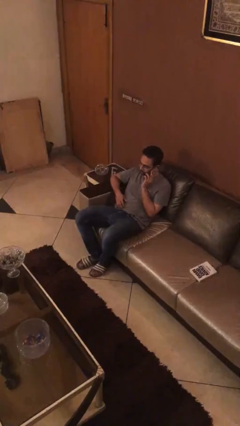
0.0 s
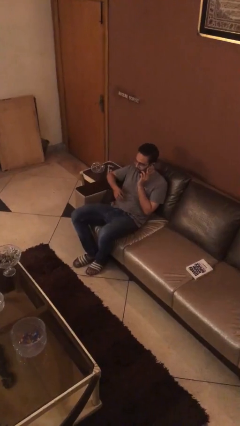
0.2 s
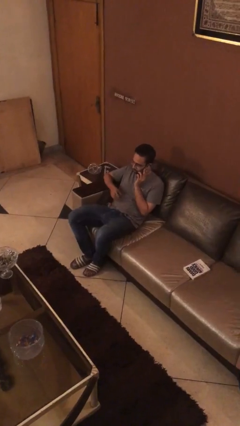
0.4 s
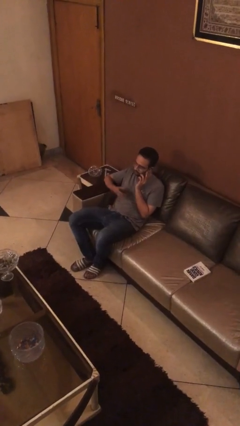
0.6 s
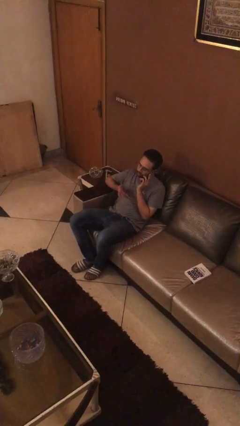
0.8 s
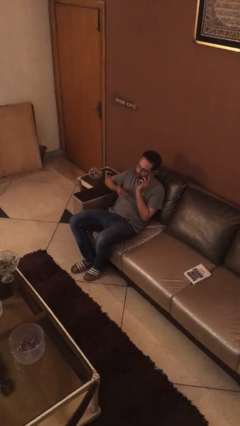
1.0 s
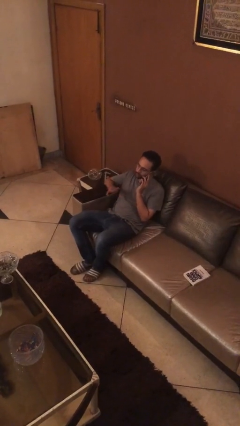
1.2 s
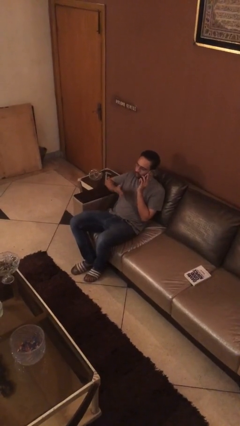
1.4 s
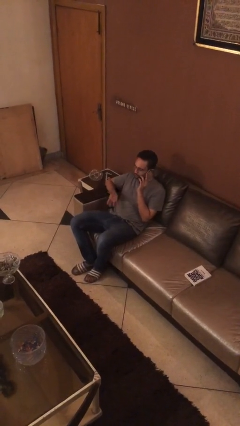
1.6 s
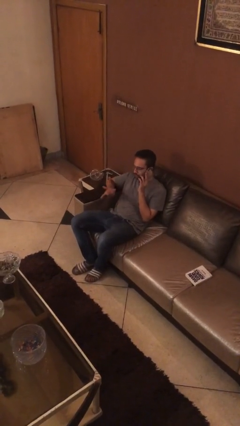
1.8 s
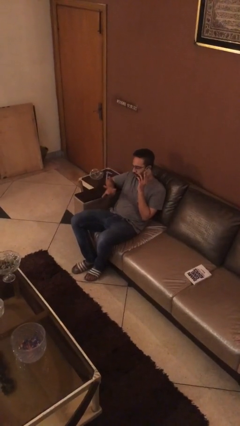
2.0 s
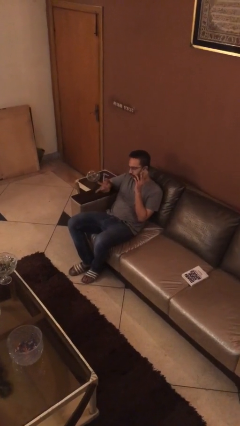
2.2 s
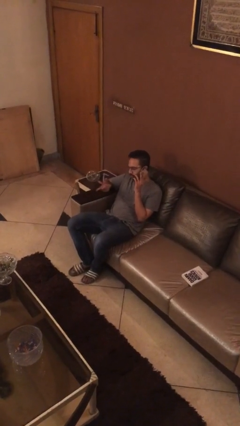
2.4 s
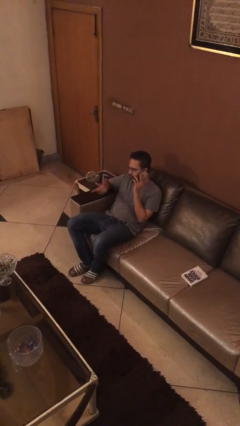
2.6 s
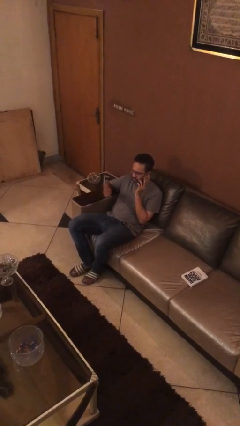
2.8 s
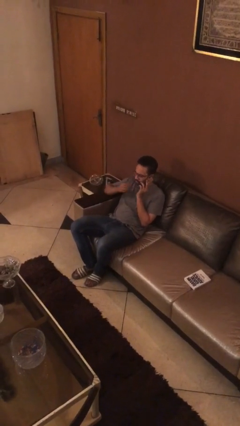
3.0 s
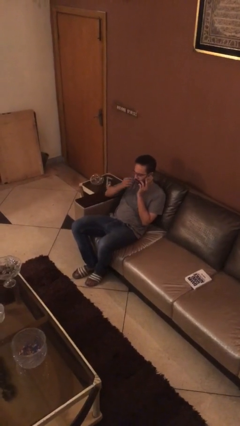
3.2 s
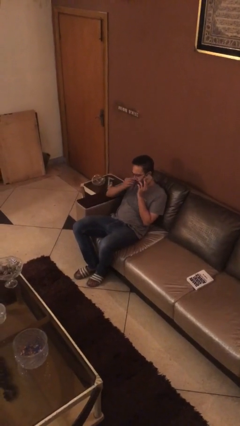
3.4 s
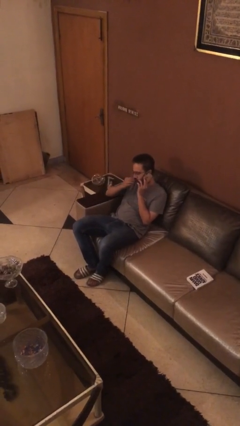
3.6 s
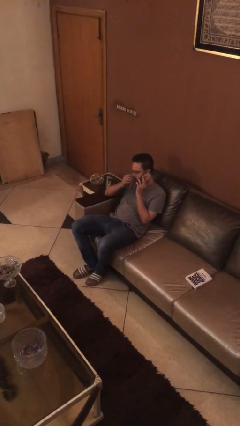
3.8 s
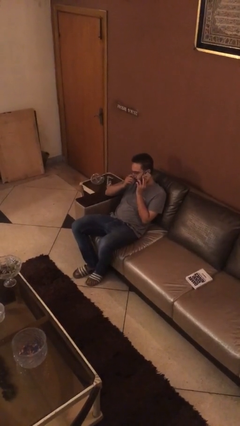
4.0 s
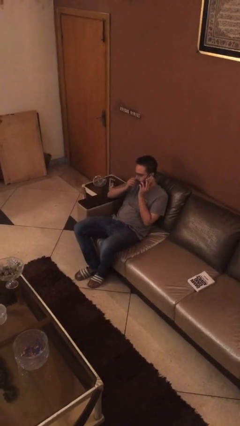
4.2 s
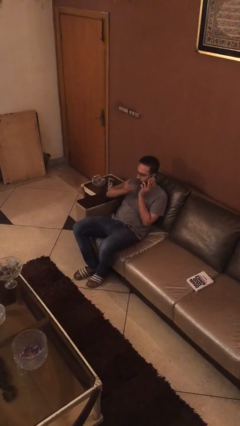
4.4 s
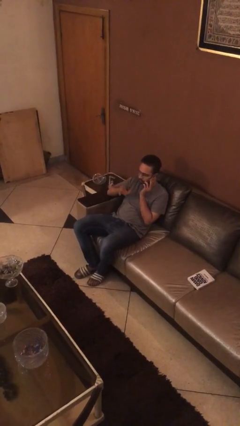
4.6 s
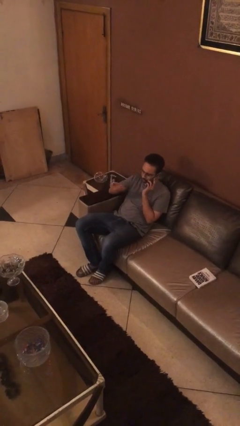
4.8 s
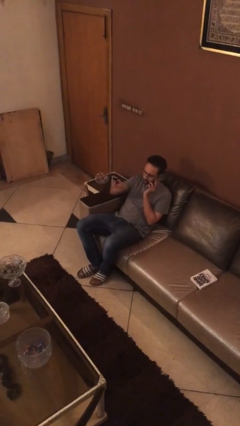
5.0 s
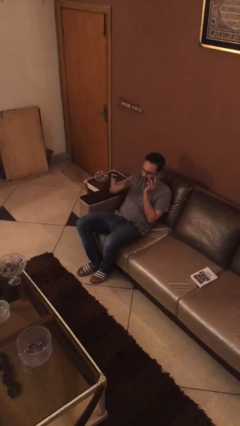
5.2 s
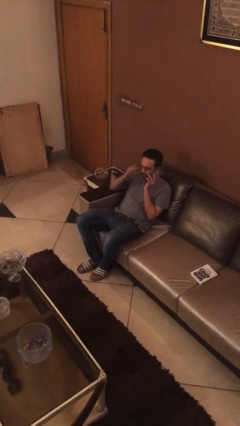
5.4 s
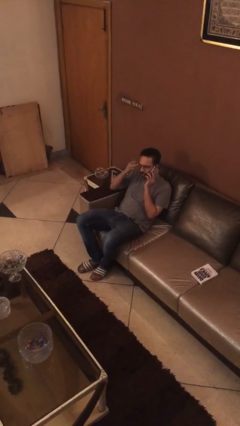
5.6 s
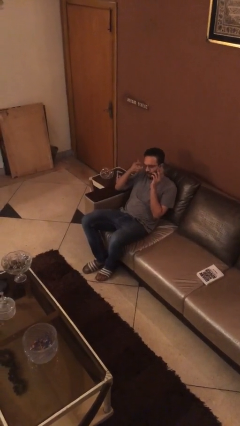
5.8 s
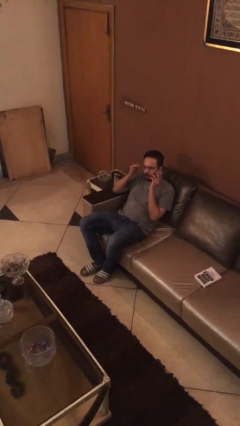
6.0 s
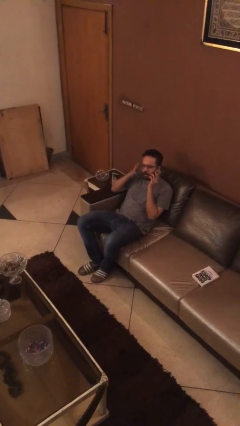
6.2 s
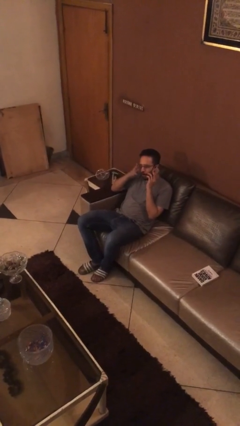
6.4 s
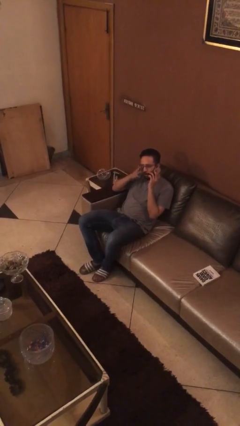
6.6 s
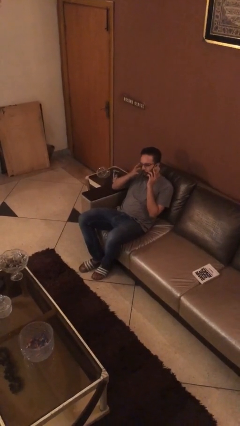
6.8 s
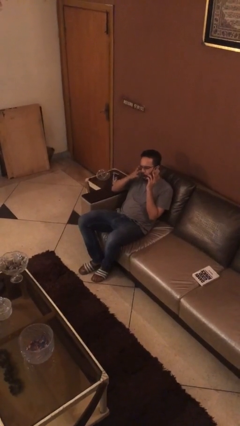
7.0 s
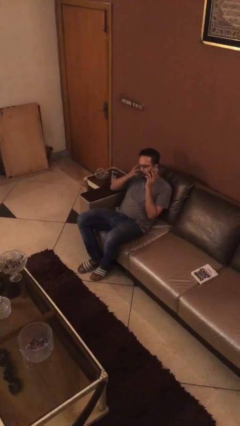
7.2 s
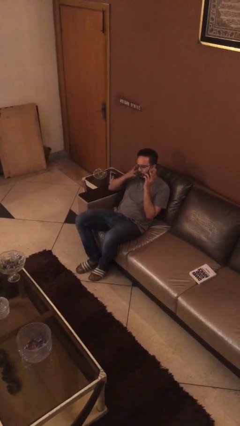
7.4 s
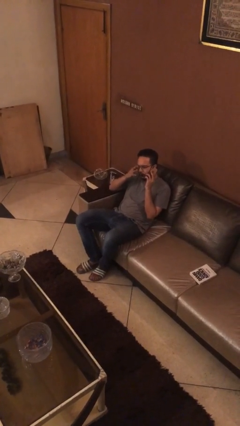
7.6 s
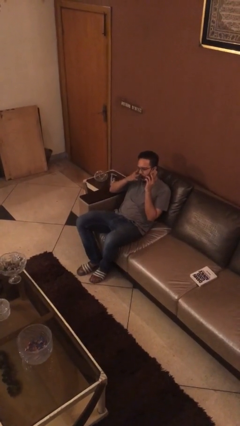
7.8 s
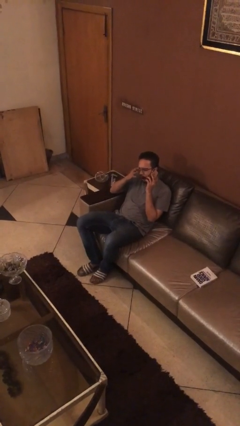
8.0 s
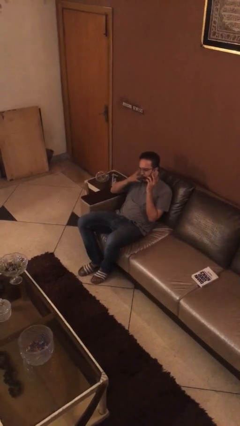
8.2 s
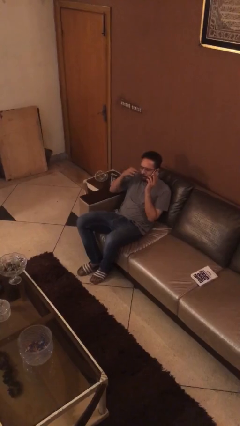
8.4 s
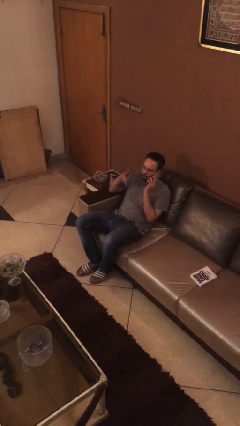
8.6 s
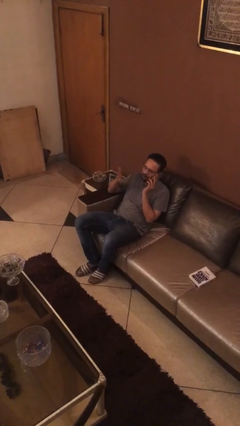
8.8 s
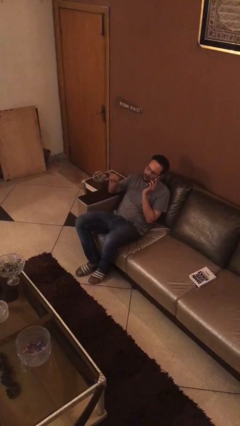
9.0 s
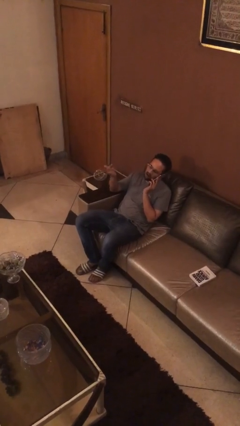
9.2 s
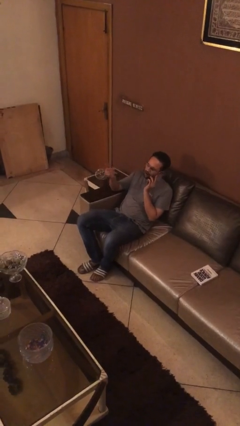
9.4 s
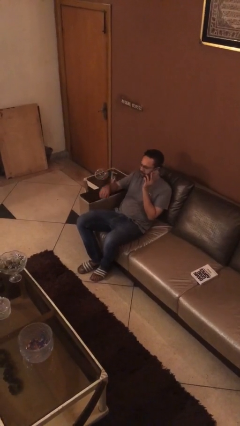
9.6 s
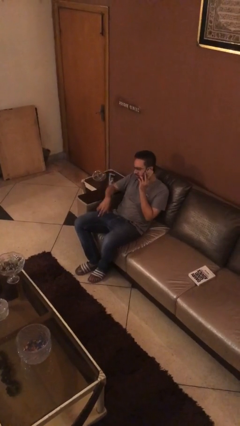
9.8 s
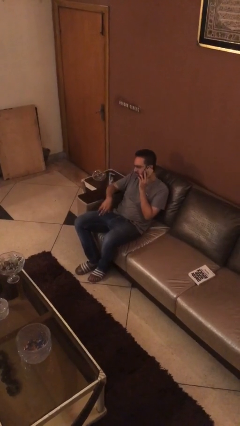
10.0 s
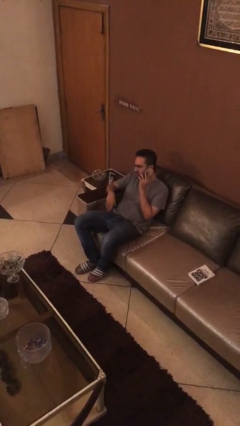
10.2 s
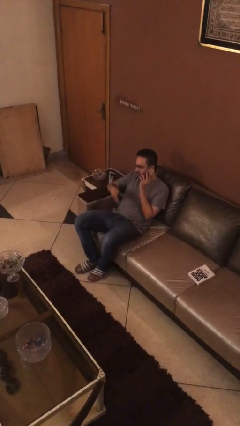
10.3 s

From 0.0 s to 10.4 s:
person talks on phone

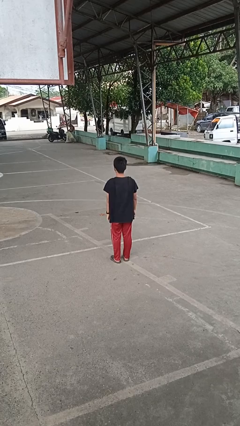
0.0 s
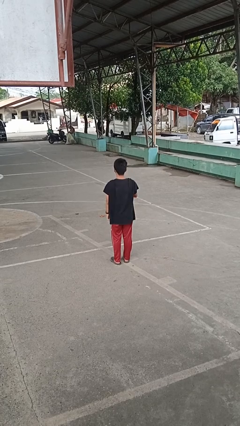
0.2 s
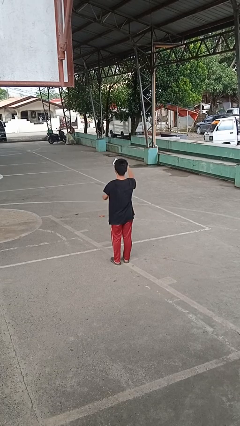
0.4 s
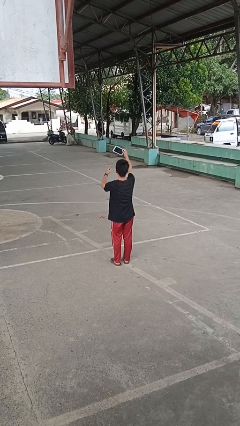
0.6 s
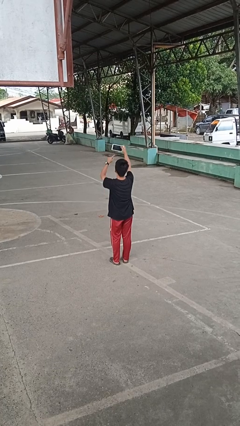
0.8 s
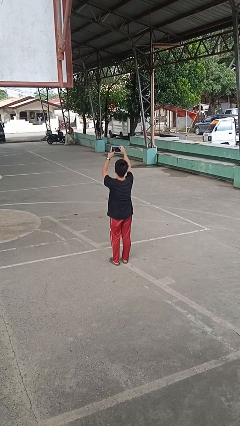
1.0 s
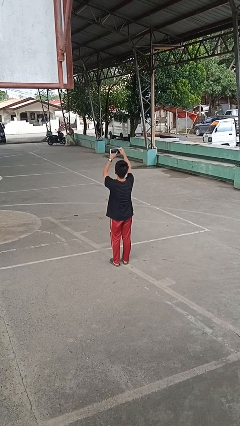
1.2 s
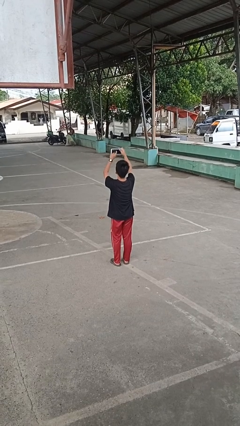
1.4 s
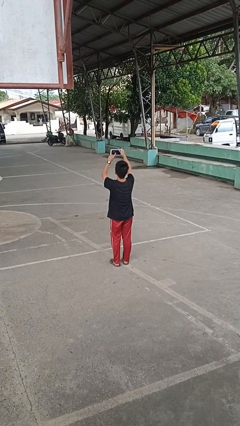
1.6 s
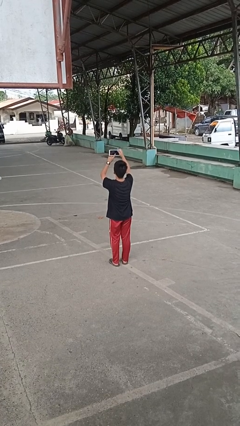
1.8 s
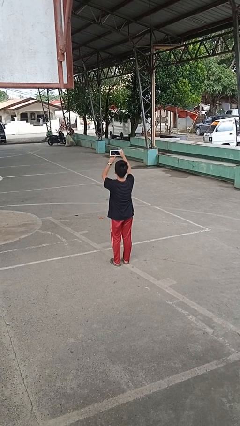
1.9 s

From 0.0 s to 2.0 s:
person interacts with tablet

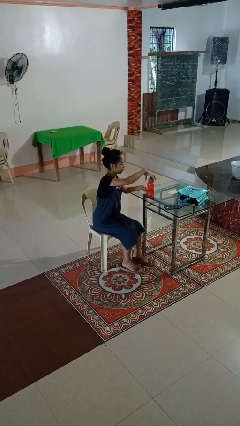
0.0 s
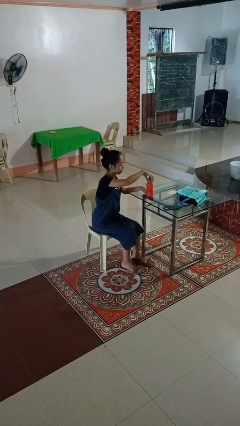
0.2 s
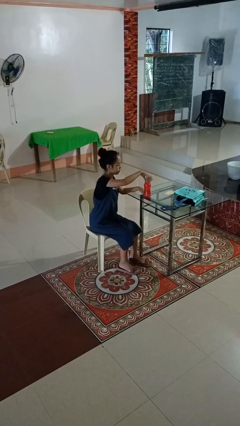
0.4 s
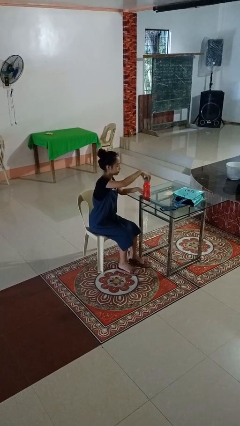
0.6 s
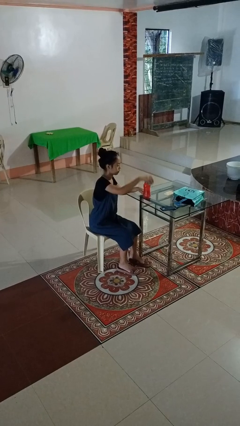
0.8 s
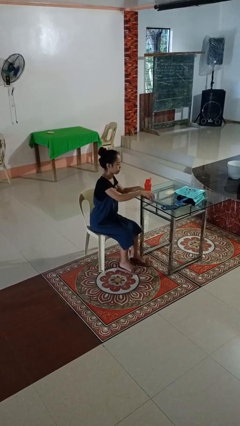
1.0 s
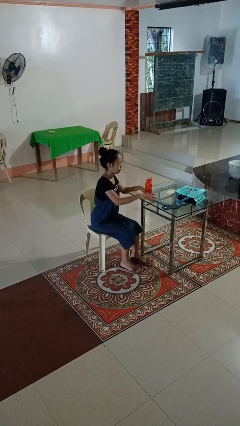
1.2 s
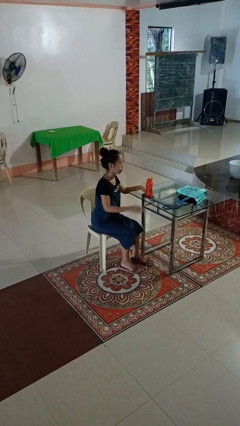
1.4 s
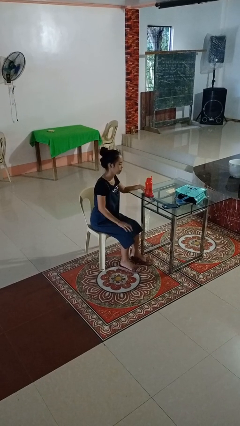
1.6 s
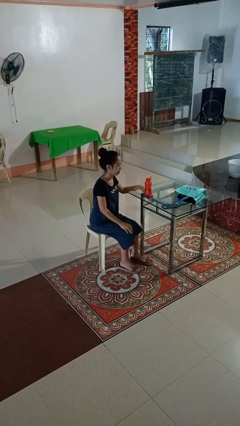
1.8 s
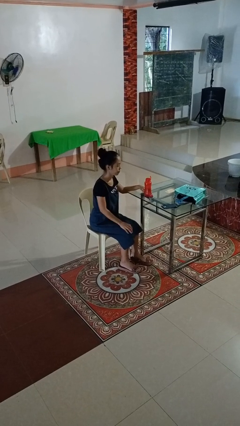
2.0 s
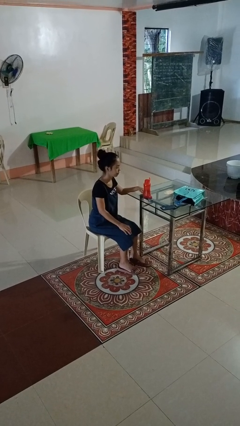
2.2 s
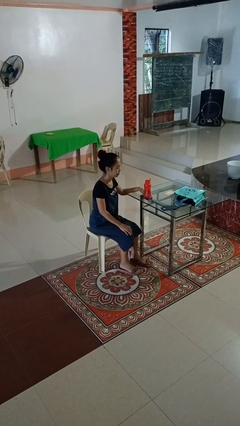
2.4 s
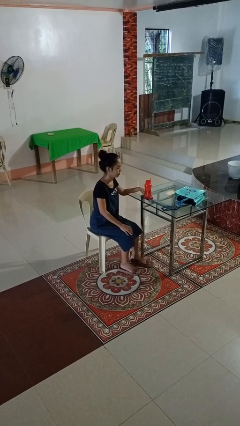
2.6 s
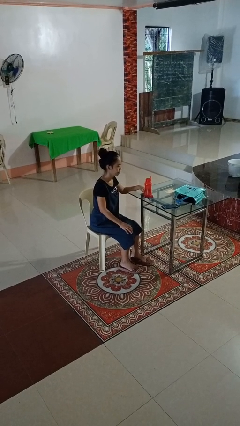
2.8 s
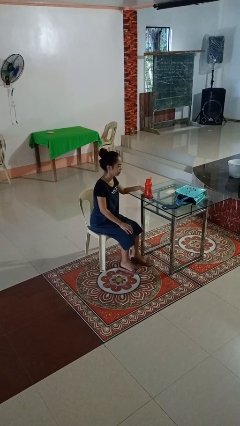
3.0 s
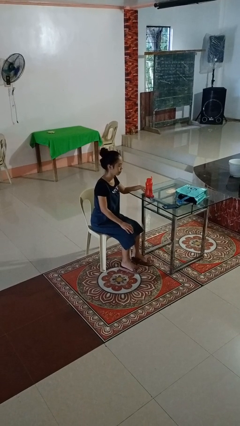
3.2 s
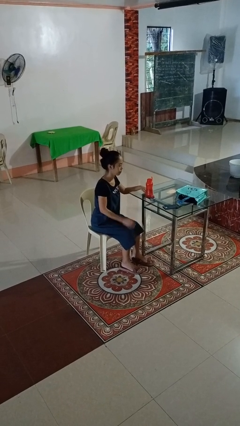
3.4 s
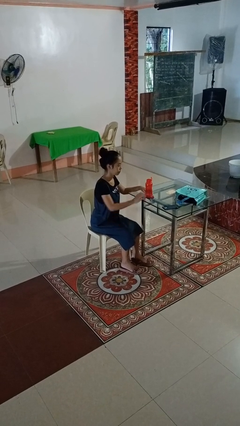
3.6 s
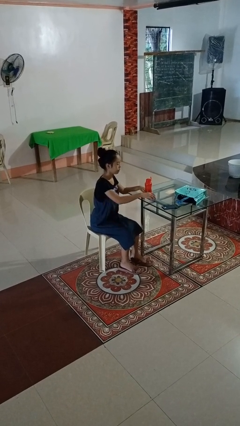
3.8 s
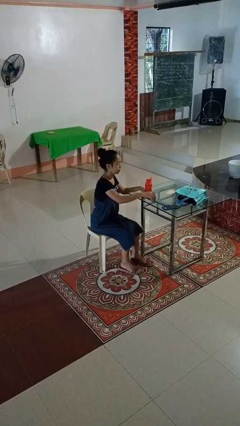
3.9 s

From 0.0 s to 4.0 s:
person unscrews lid from bottle

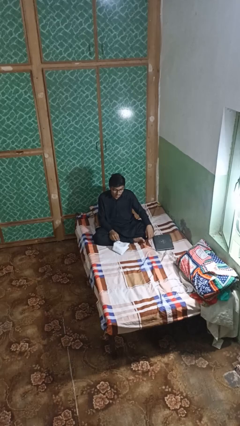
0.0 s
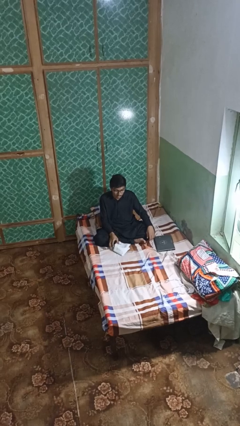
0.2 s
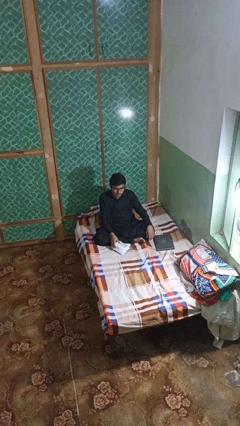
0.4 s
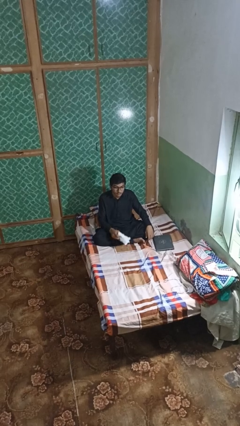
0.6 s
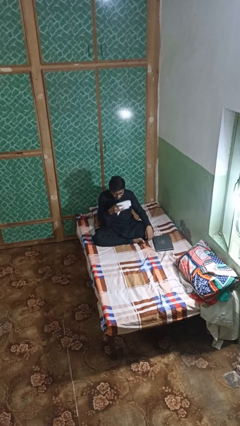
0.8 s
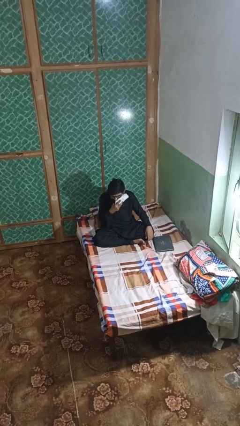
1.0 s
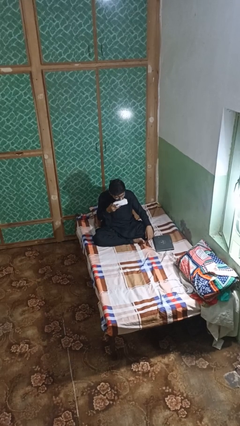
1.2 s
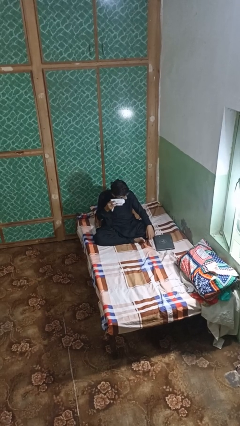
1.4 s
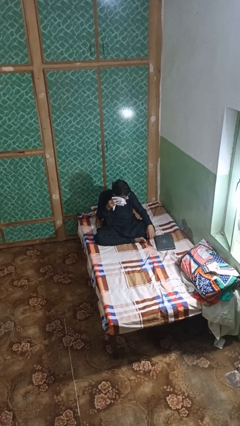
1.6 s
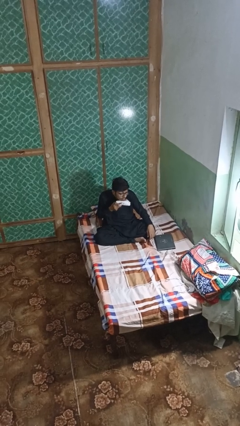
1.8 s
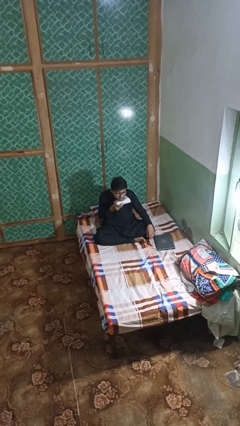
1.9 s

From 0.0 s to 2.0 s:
person wipes mouth with napkin
